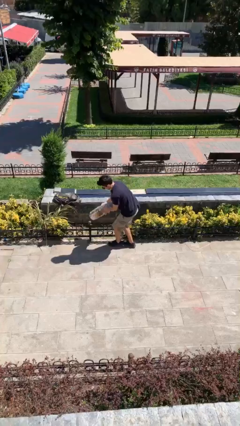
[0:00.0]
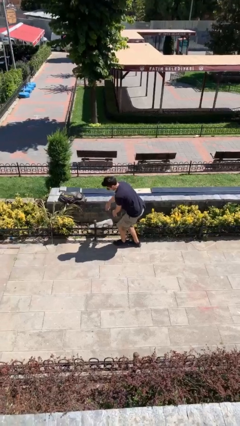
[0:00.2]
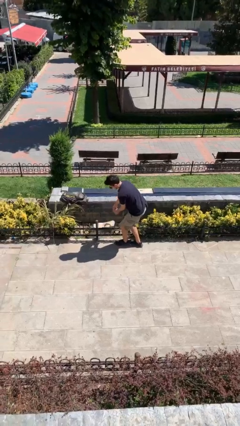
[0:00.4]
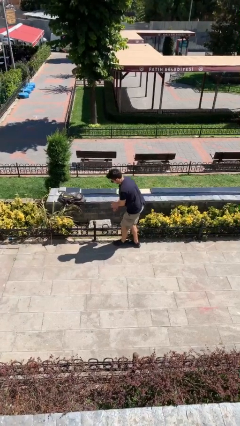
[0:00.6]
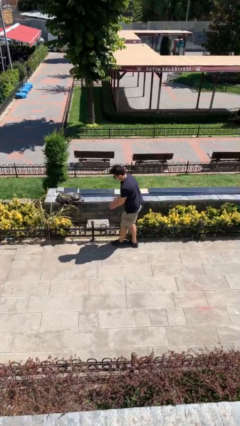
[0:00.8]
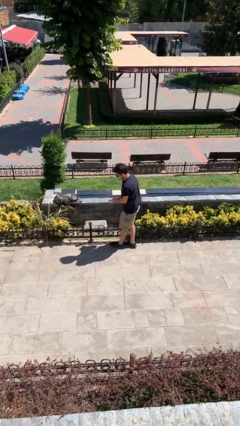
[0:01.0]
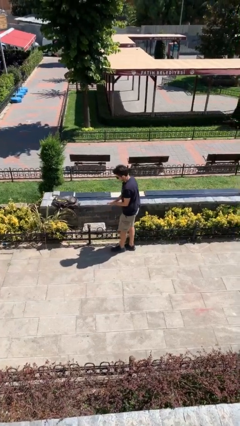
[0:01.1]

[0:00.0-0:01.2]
person puts down object on floor

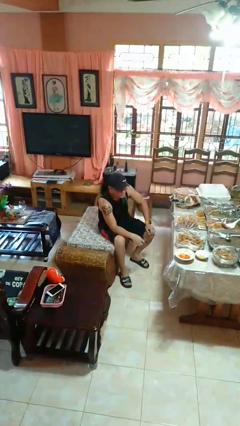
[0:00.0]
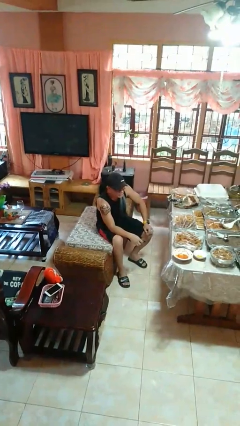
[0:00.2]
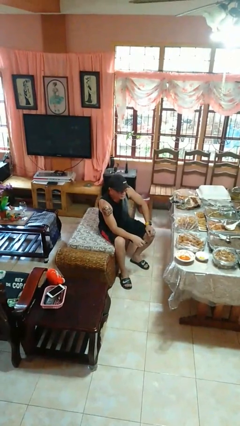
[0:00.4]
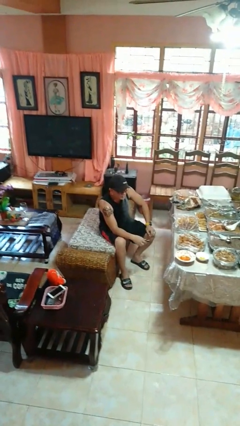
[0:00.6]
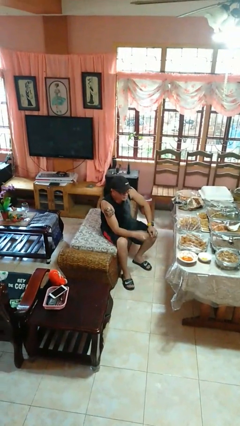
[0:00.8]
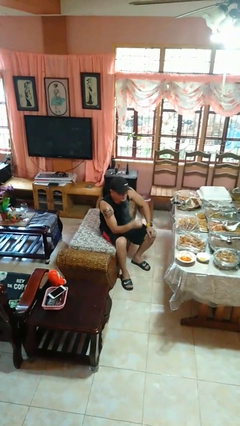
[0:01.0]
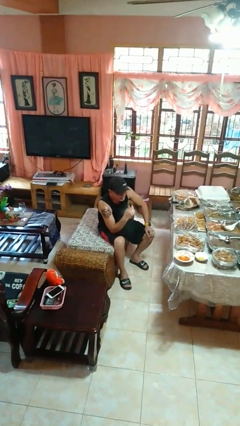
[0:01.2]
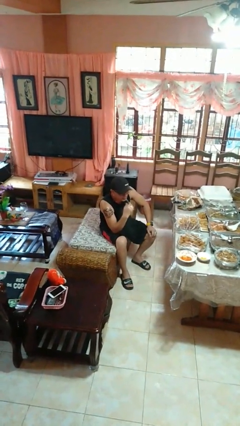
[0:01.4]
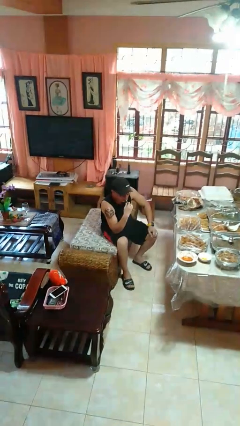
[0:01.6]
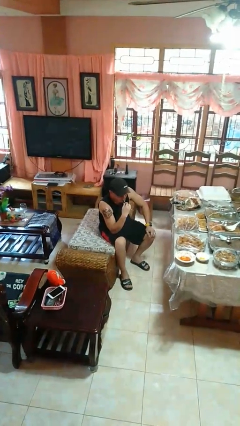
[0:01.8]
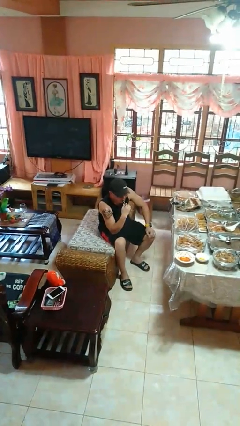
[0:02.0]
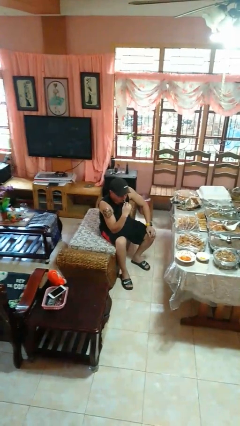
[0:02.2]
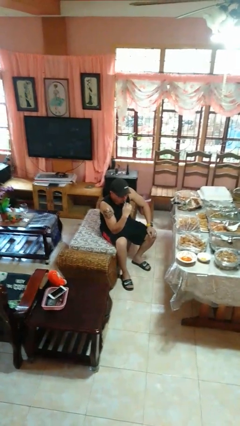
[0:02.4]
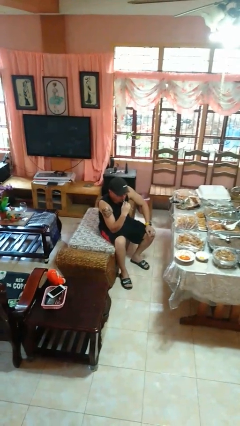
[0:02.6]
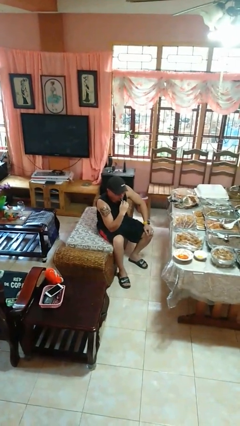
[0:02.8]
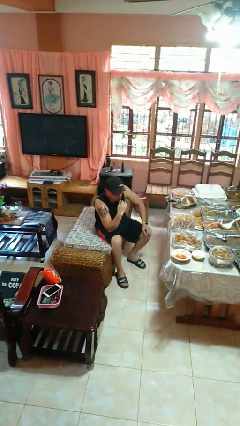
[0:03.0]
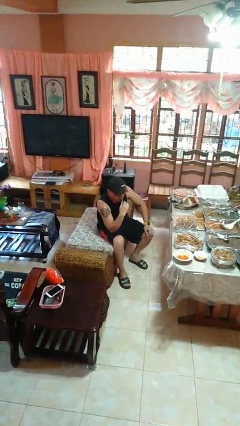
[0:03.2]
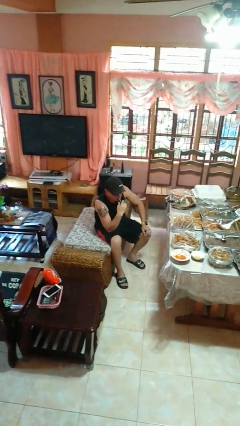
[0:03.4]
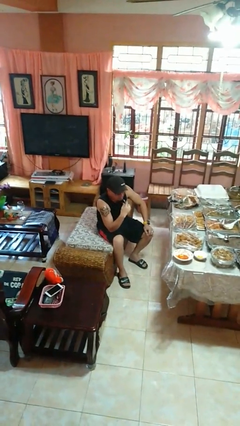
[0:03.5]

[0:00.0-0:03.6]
person vapes

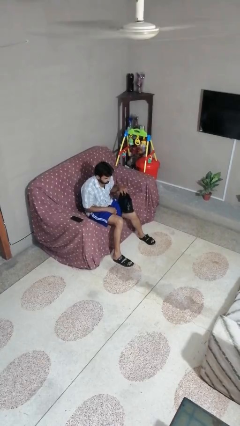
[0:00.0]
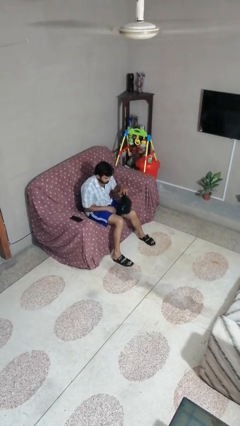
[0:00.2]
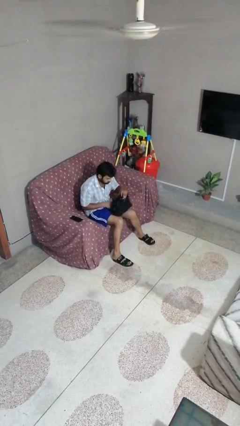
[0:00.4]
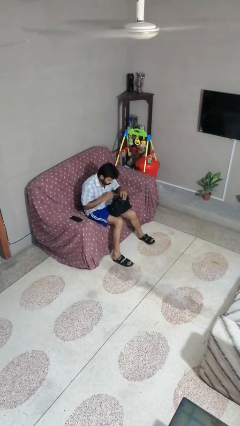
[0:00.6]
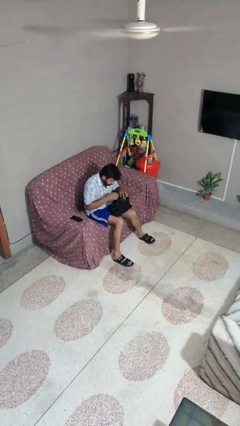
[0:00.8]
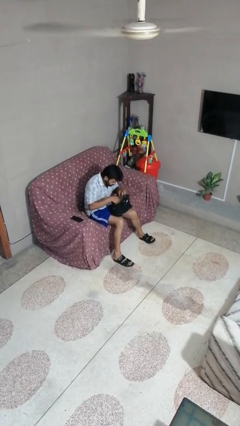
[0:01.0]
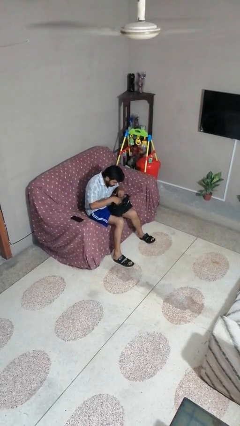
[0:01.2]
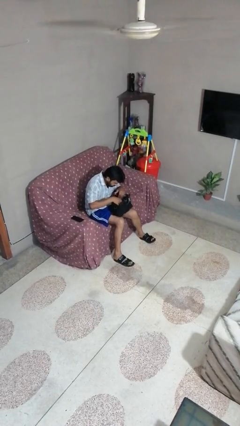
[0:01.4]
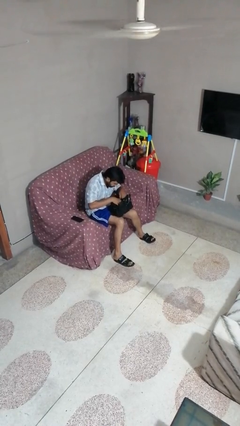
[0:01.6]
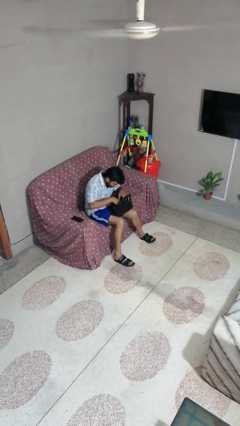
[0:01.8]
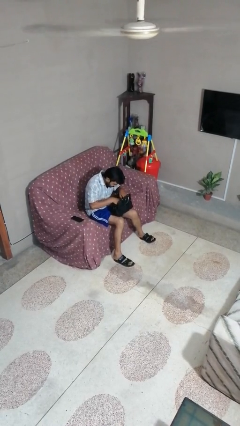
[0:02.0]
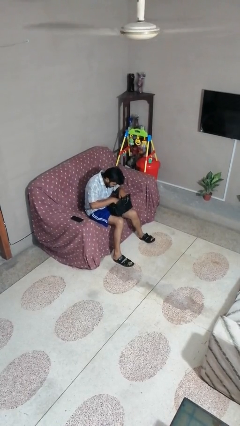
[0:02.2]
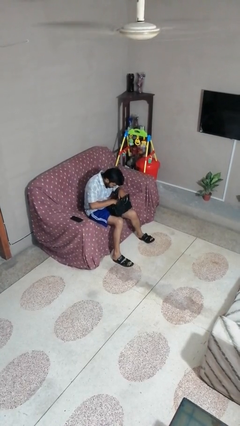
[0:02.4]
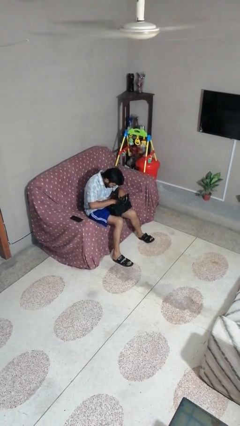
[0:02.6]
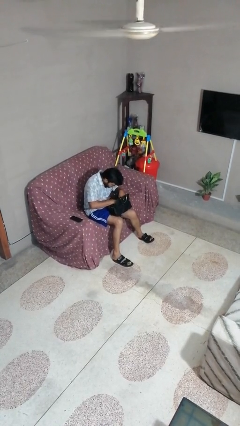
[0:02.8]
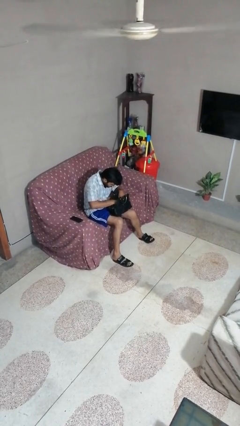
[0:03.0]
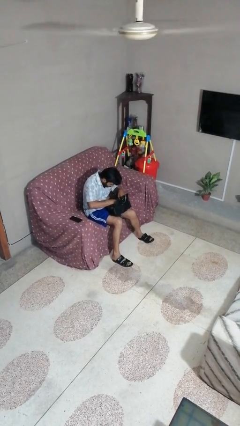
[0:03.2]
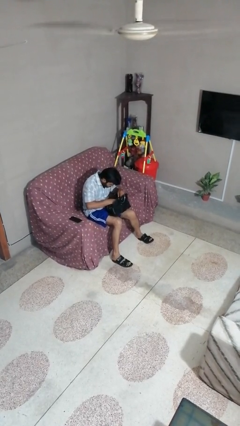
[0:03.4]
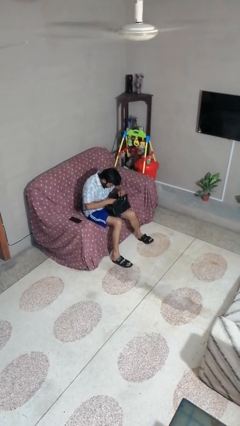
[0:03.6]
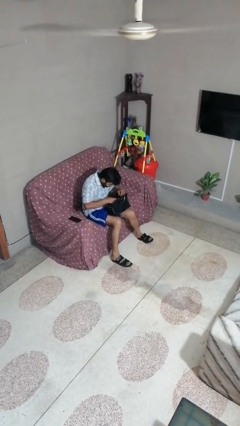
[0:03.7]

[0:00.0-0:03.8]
person searches in purse

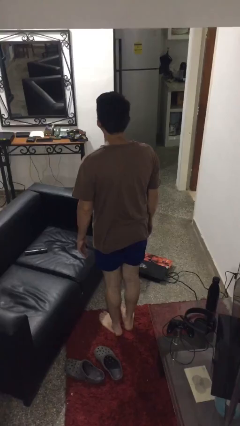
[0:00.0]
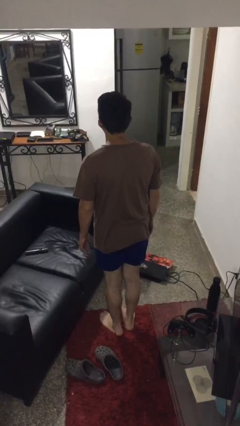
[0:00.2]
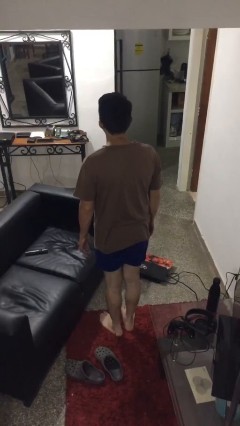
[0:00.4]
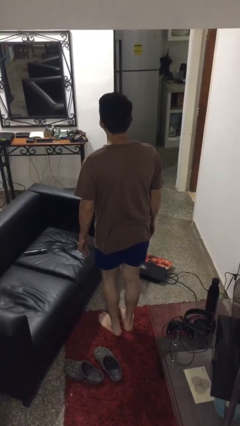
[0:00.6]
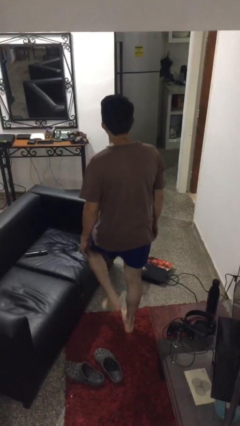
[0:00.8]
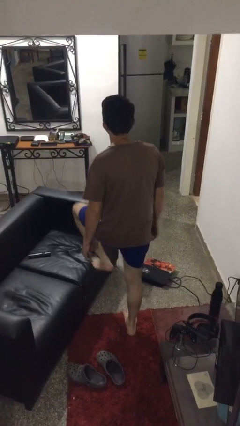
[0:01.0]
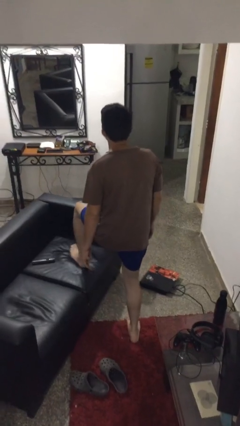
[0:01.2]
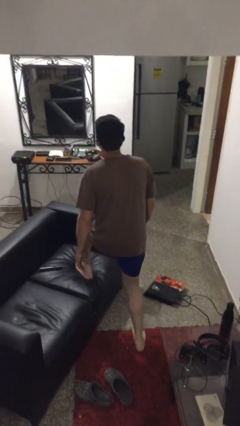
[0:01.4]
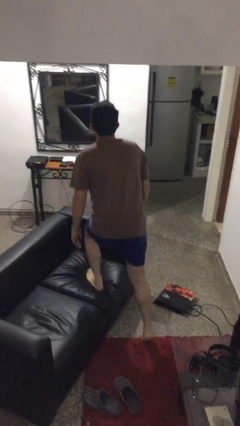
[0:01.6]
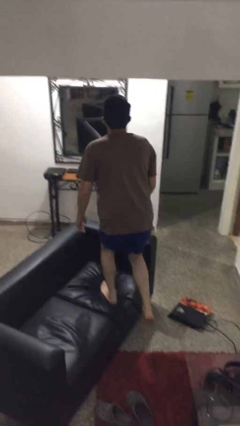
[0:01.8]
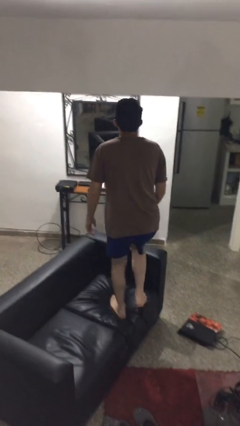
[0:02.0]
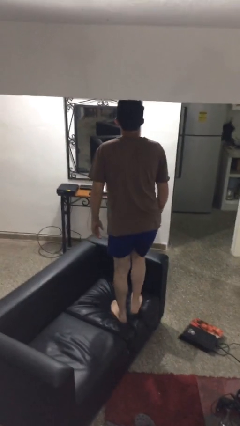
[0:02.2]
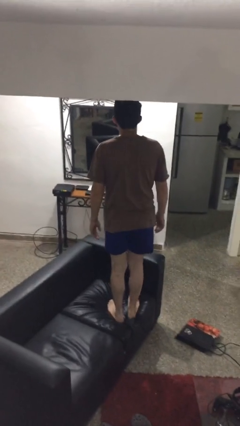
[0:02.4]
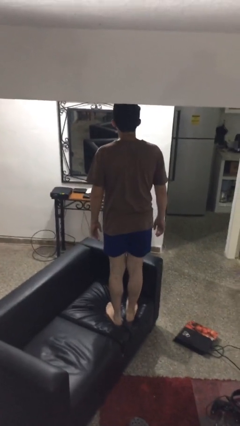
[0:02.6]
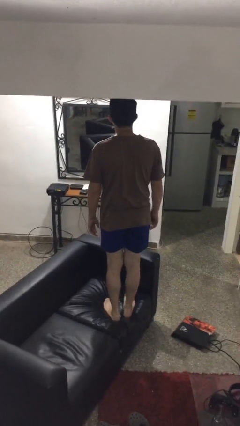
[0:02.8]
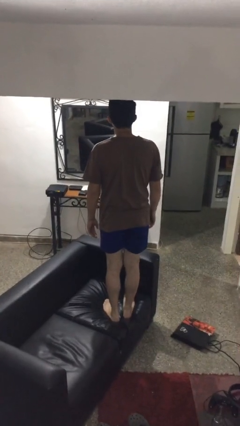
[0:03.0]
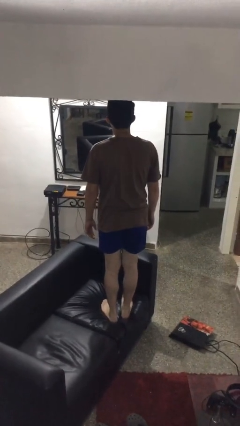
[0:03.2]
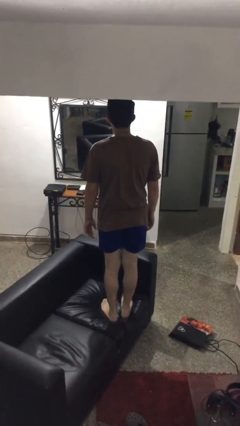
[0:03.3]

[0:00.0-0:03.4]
person climbs on couch

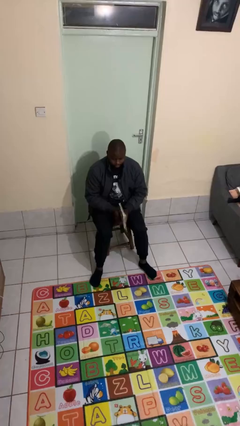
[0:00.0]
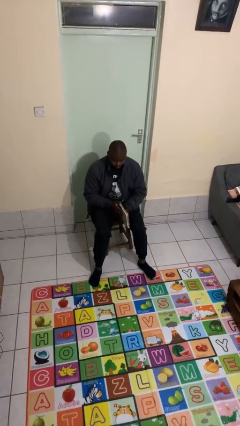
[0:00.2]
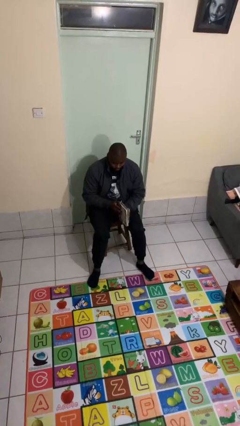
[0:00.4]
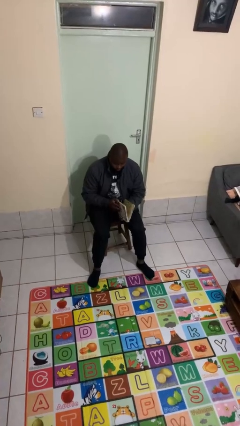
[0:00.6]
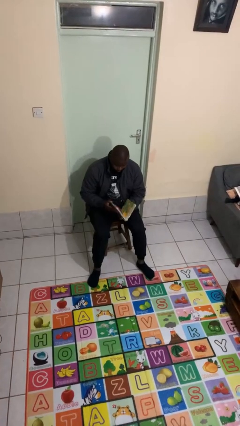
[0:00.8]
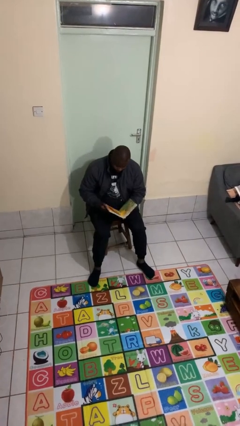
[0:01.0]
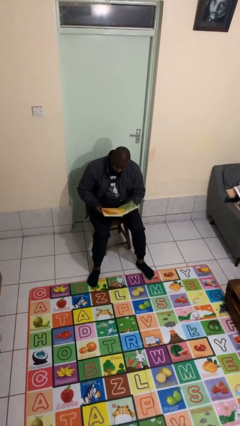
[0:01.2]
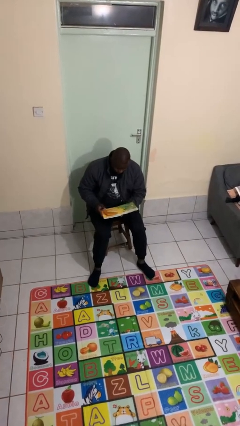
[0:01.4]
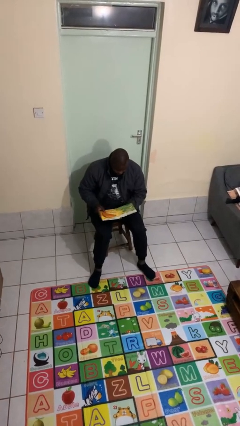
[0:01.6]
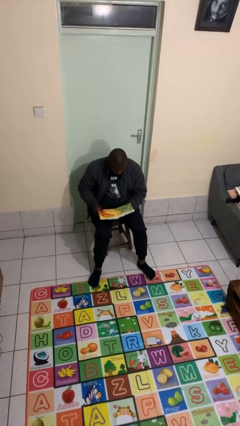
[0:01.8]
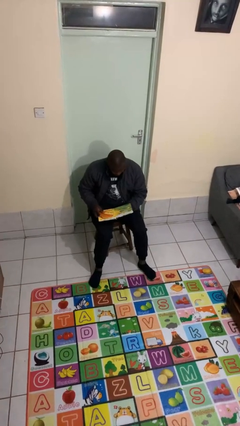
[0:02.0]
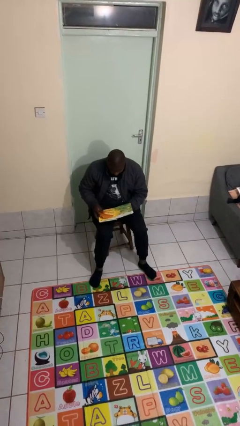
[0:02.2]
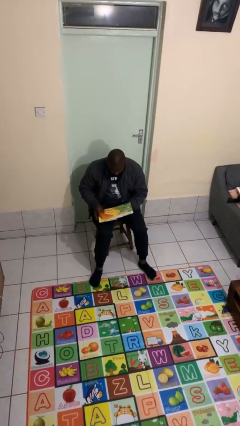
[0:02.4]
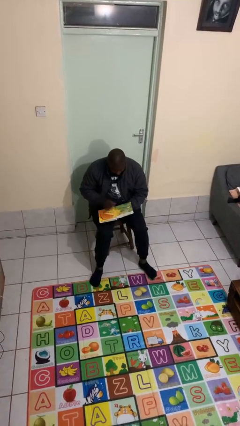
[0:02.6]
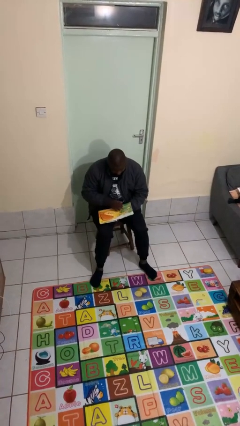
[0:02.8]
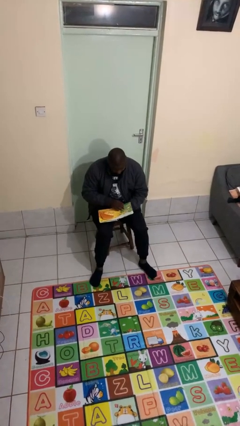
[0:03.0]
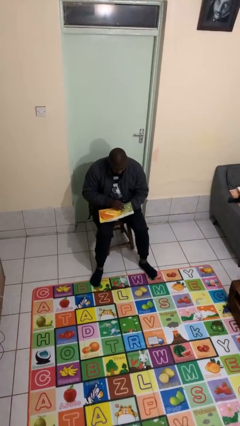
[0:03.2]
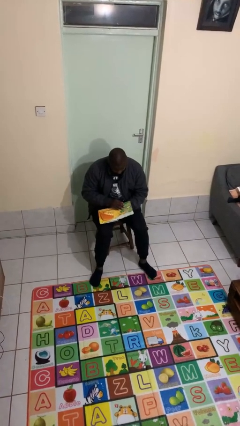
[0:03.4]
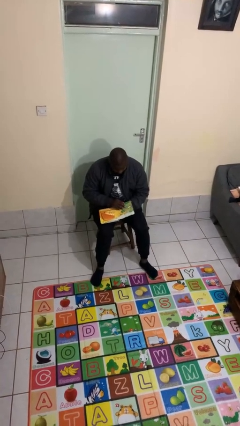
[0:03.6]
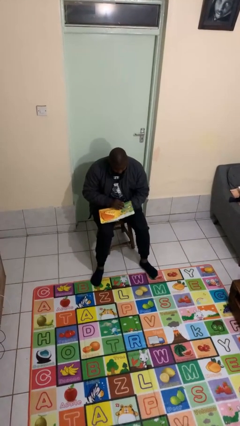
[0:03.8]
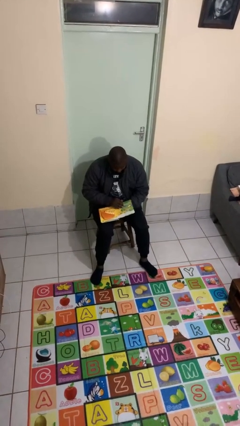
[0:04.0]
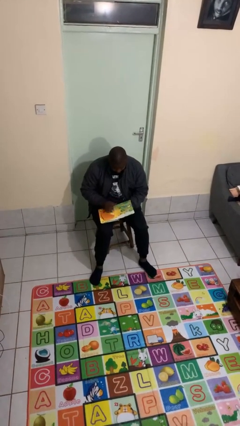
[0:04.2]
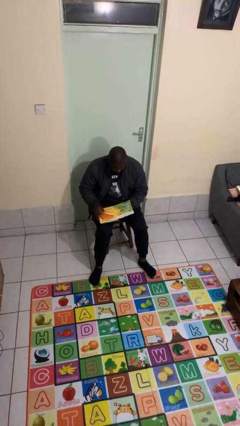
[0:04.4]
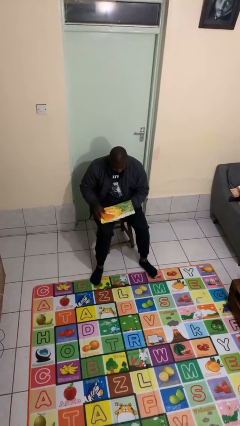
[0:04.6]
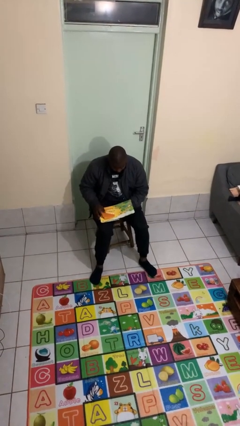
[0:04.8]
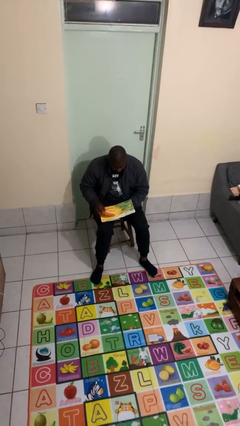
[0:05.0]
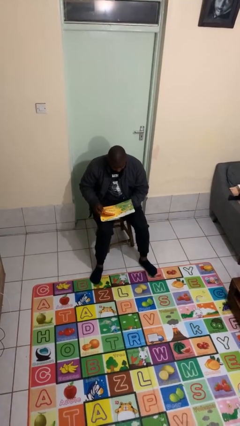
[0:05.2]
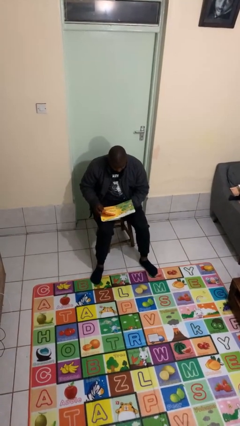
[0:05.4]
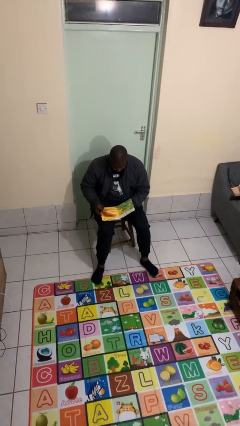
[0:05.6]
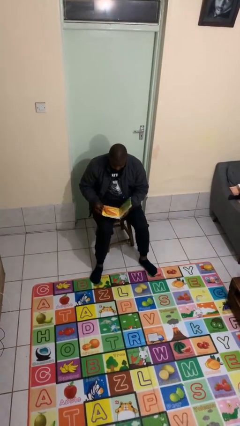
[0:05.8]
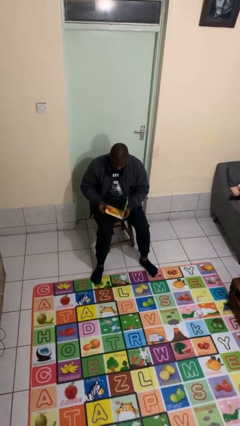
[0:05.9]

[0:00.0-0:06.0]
person reads book
